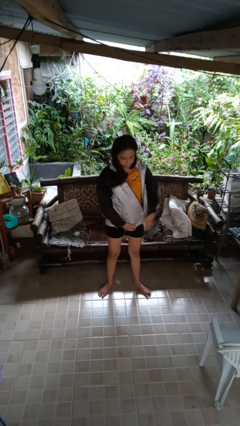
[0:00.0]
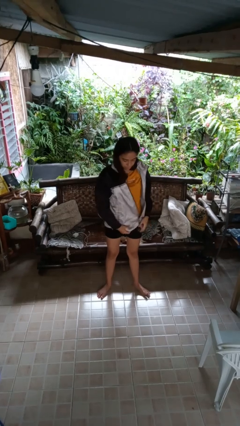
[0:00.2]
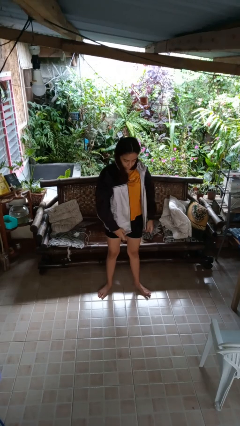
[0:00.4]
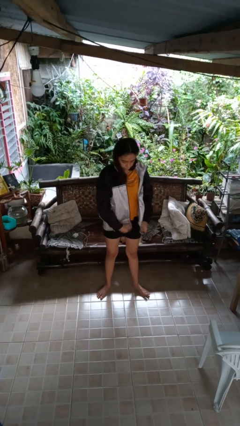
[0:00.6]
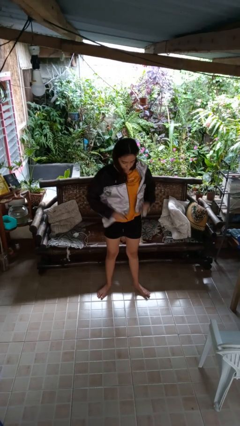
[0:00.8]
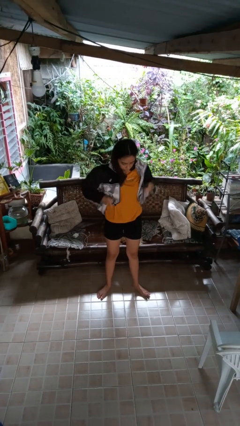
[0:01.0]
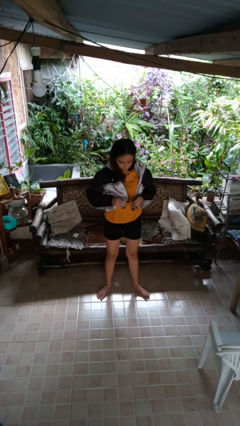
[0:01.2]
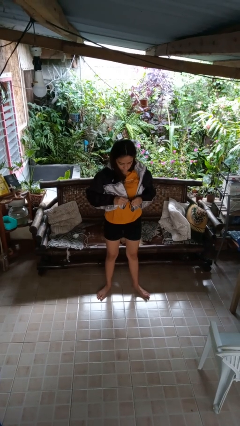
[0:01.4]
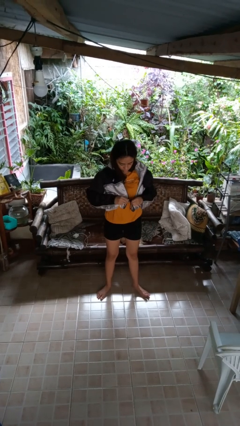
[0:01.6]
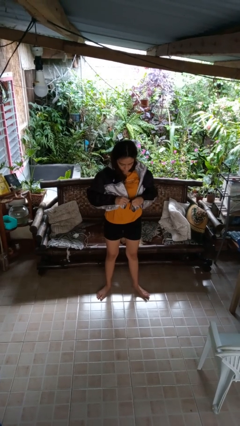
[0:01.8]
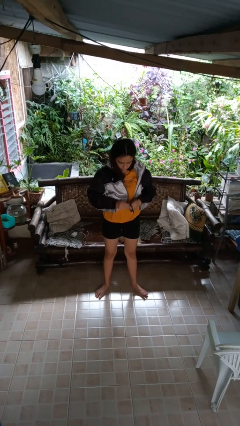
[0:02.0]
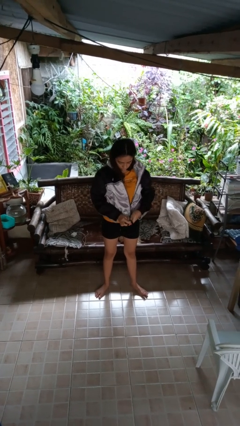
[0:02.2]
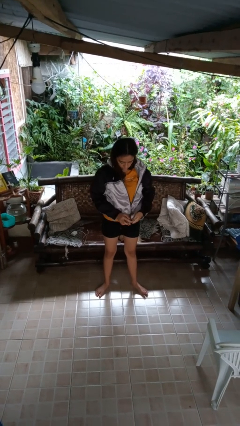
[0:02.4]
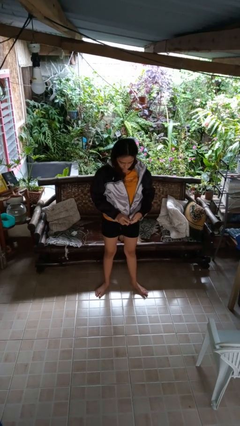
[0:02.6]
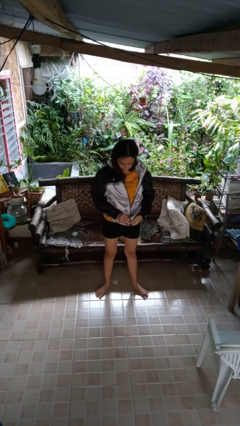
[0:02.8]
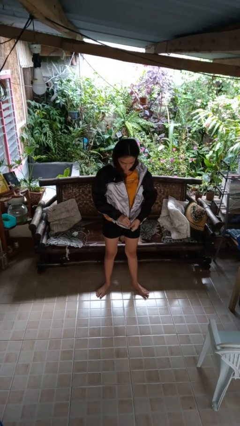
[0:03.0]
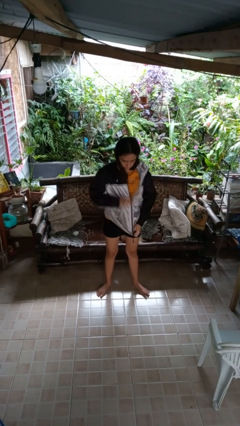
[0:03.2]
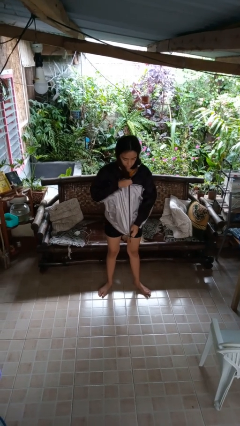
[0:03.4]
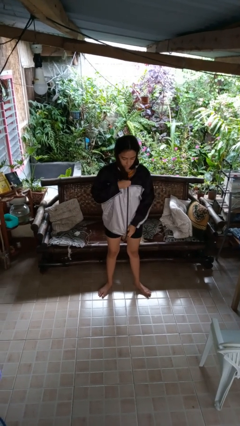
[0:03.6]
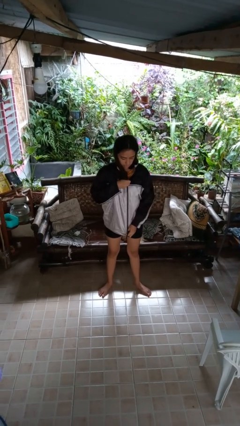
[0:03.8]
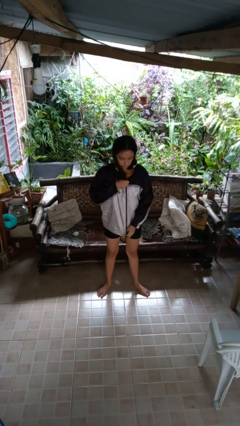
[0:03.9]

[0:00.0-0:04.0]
person zips up jacket

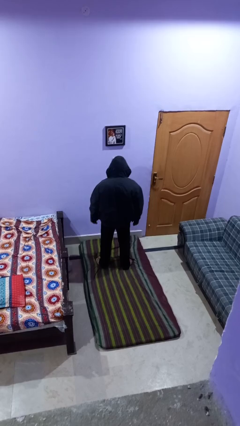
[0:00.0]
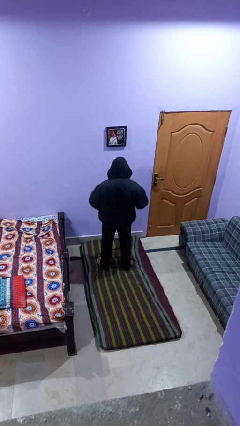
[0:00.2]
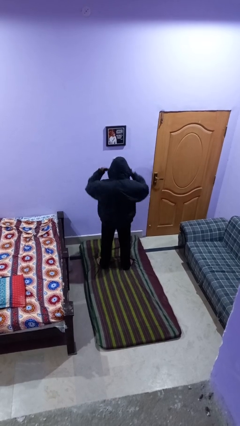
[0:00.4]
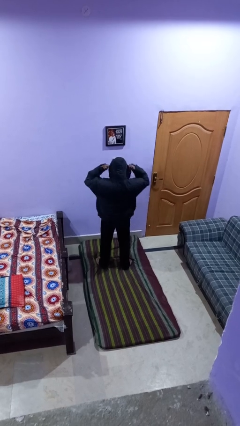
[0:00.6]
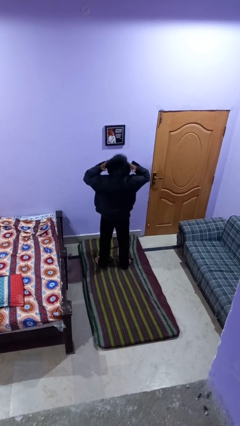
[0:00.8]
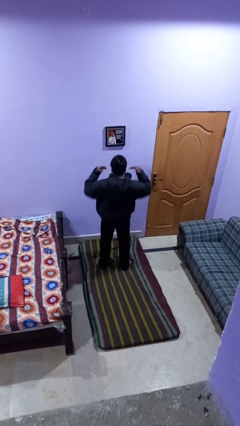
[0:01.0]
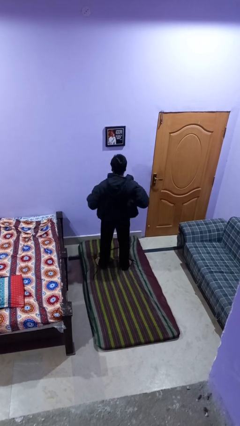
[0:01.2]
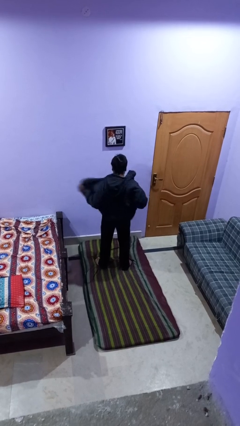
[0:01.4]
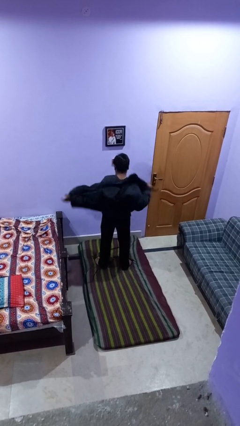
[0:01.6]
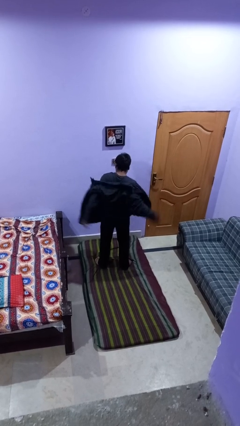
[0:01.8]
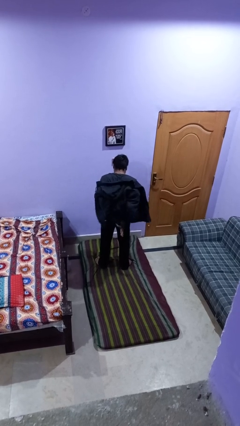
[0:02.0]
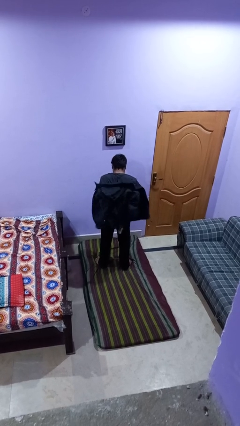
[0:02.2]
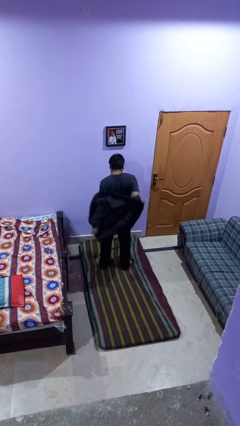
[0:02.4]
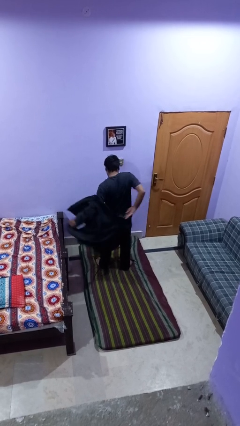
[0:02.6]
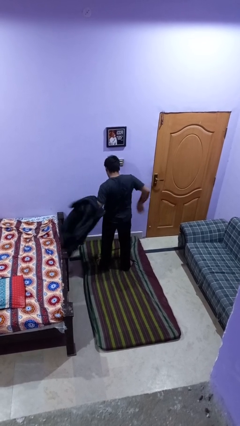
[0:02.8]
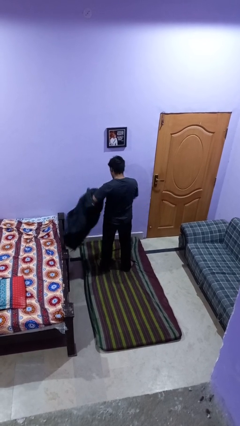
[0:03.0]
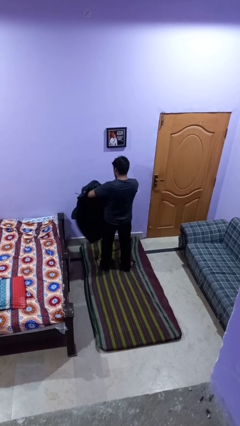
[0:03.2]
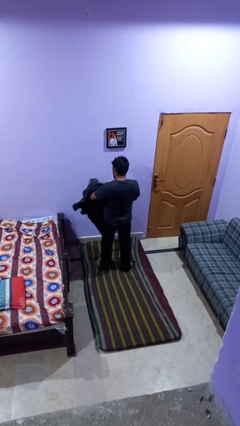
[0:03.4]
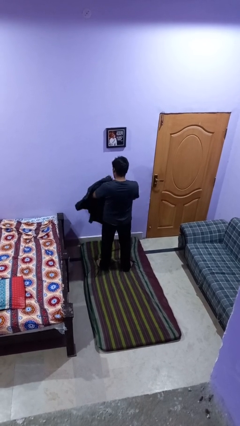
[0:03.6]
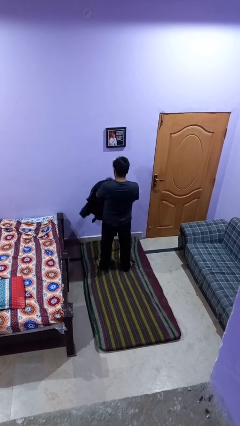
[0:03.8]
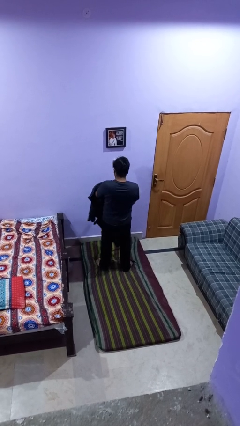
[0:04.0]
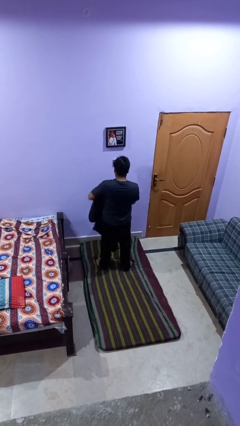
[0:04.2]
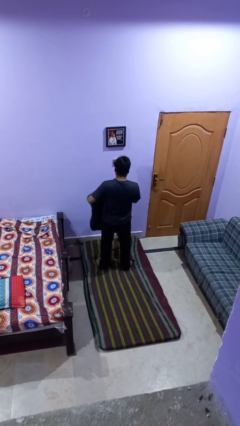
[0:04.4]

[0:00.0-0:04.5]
person takes off hoodie

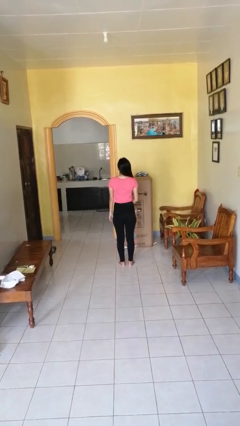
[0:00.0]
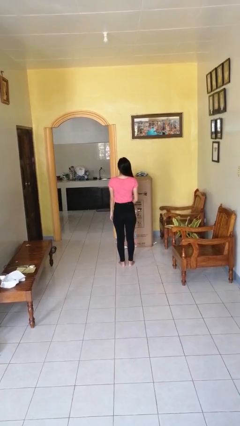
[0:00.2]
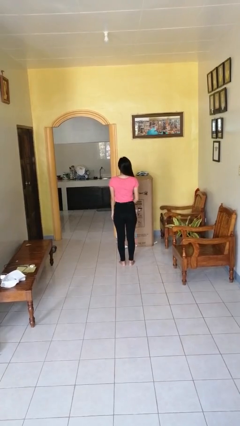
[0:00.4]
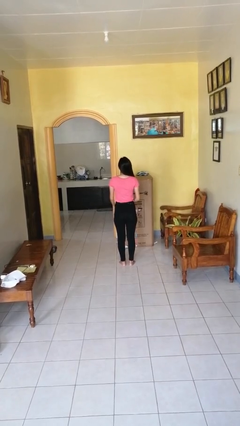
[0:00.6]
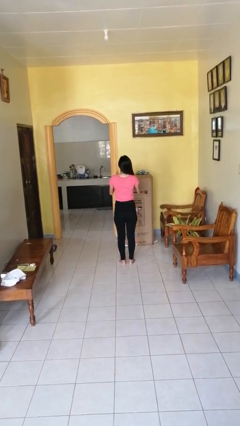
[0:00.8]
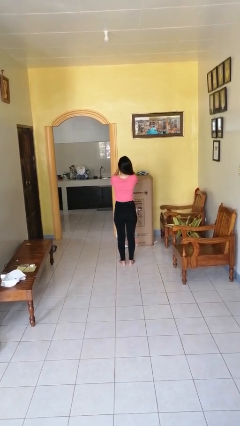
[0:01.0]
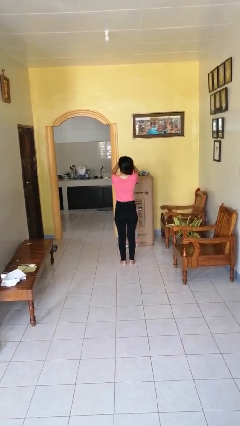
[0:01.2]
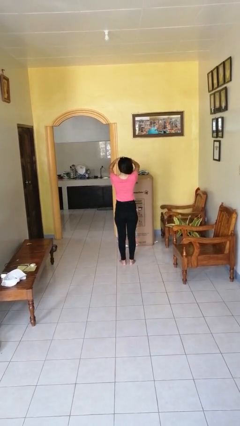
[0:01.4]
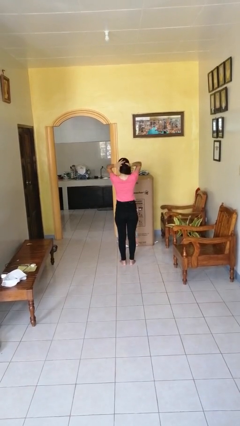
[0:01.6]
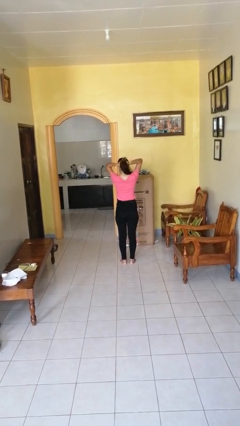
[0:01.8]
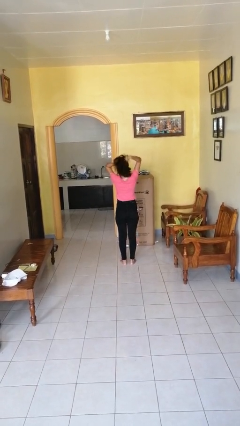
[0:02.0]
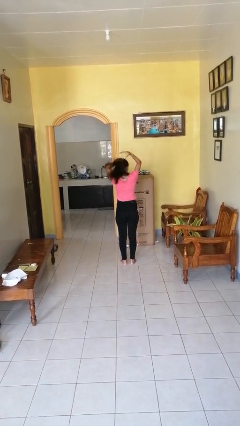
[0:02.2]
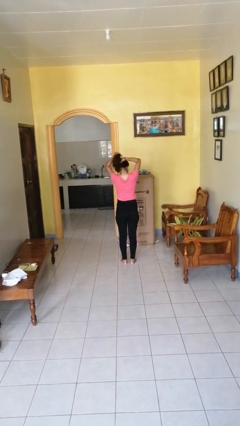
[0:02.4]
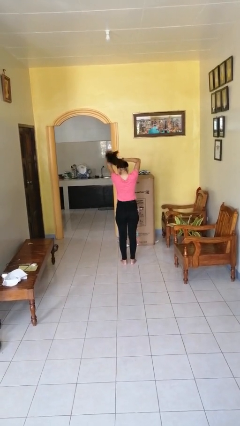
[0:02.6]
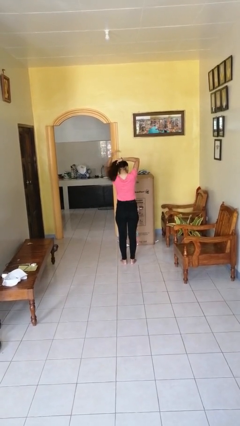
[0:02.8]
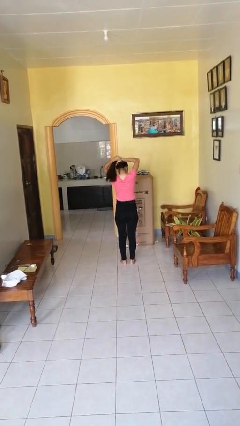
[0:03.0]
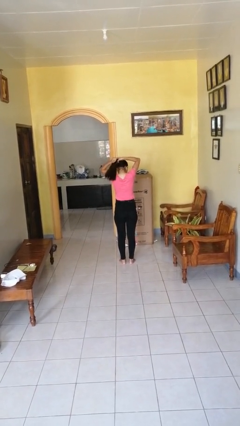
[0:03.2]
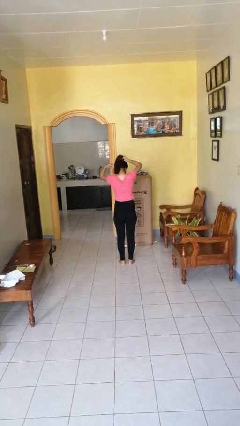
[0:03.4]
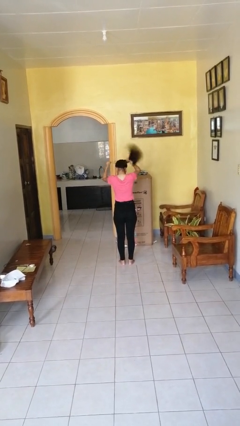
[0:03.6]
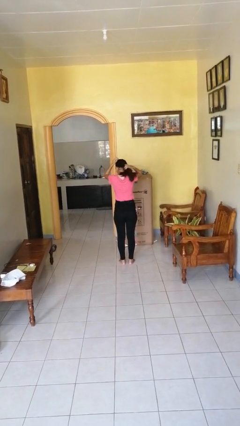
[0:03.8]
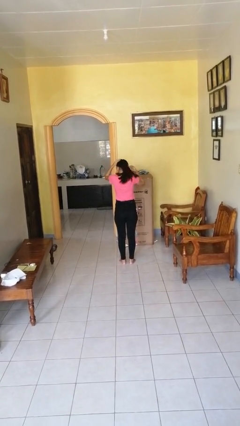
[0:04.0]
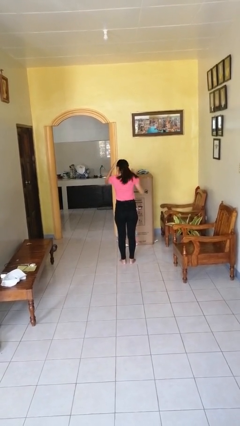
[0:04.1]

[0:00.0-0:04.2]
person puts hair in ponytail

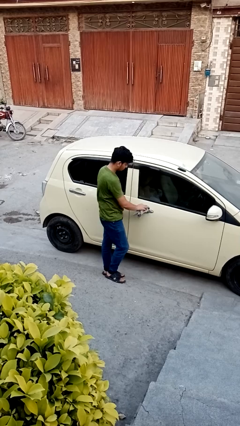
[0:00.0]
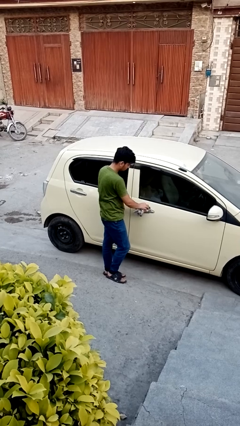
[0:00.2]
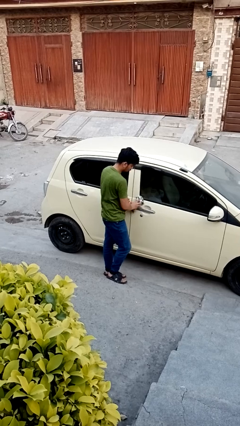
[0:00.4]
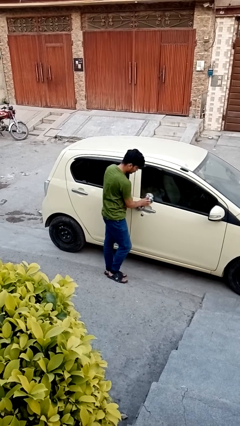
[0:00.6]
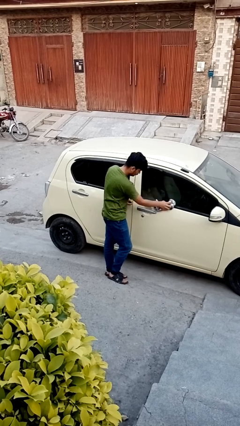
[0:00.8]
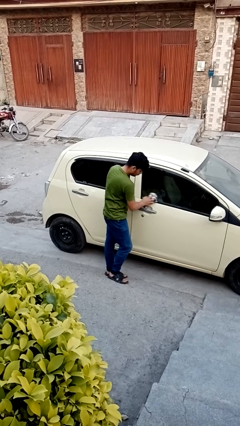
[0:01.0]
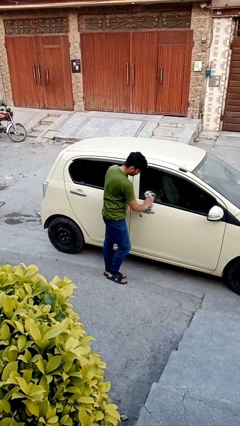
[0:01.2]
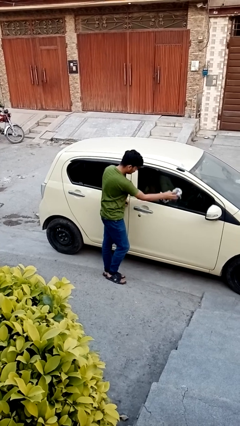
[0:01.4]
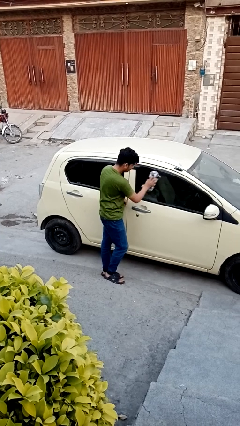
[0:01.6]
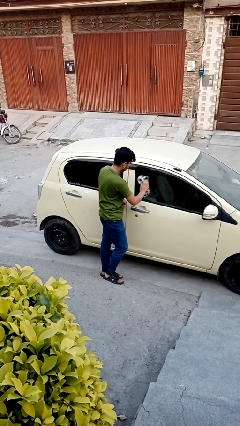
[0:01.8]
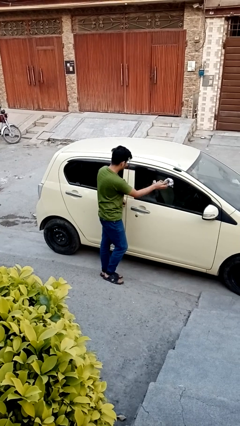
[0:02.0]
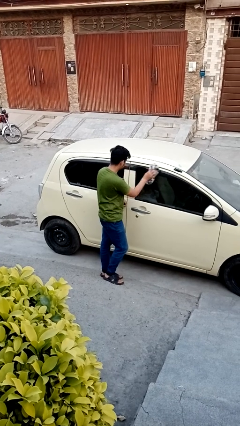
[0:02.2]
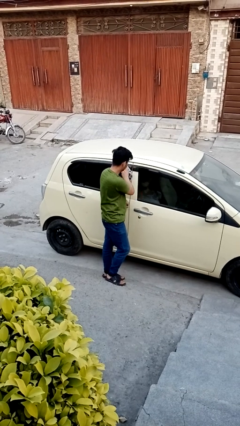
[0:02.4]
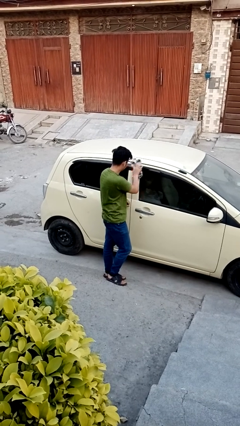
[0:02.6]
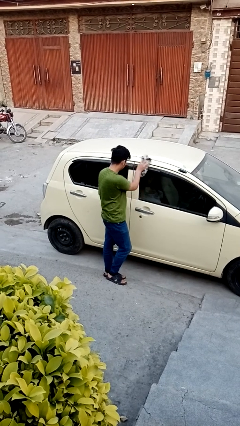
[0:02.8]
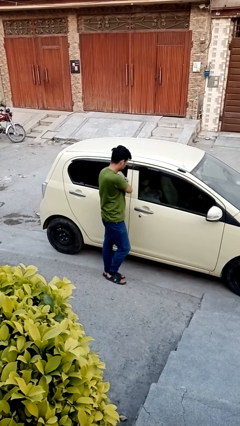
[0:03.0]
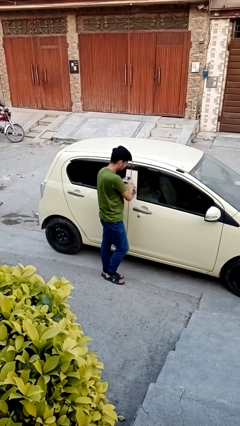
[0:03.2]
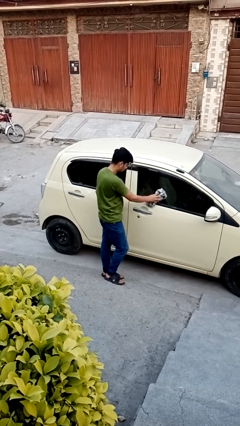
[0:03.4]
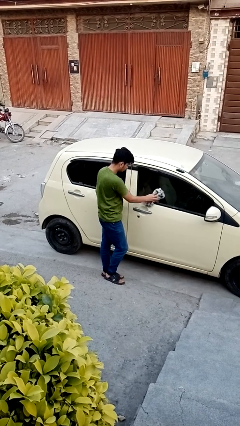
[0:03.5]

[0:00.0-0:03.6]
person polishes car with rag

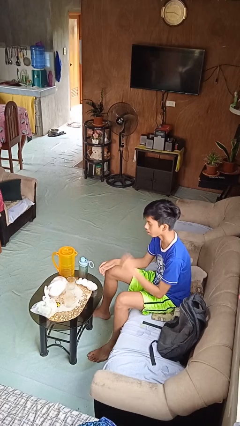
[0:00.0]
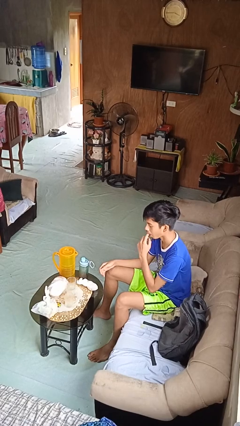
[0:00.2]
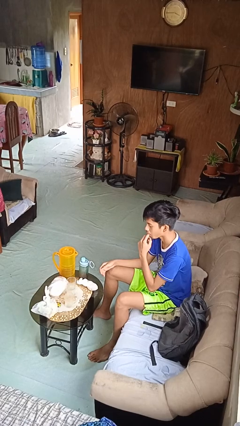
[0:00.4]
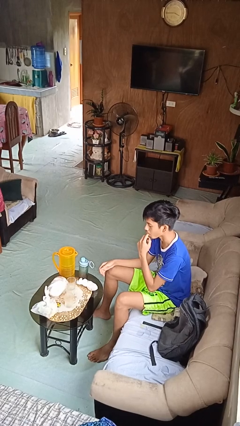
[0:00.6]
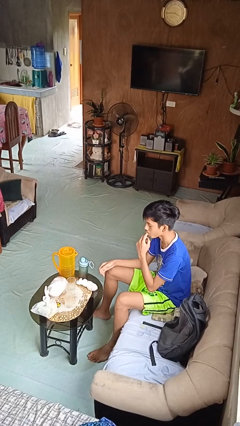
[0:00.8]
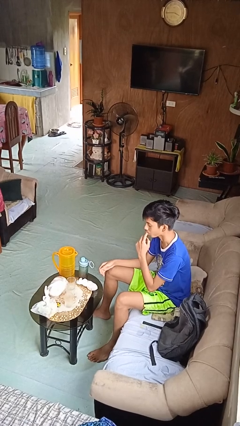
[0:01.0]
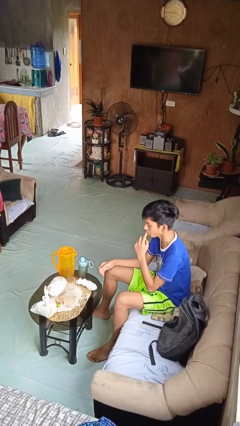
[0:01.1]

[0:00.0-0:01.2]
person licks fingers

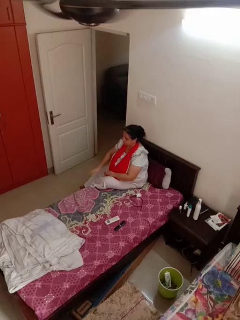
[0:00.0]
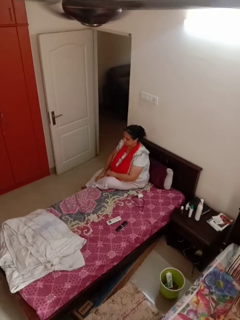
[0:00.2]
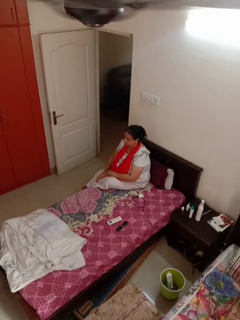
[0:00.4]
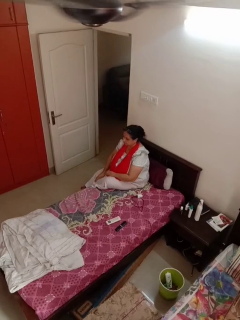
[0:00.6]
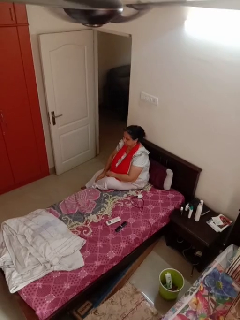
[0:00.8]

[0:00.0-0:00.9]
person gestures lower hand
